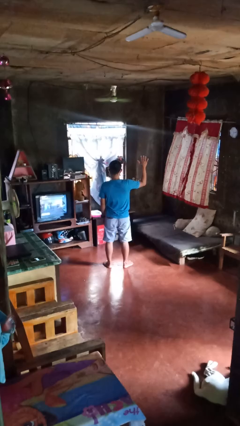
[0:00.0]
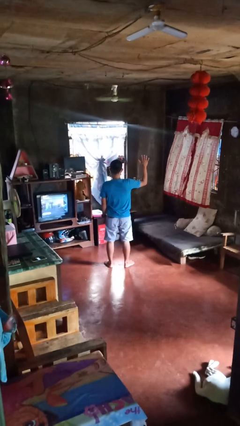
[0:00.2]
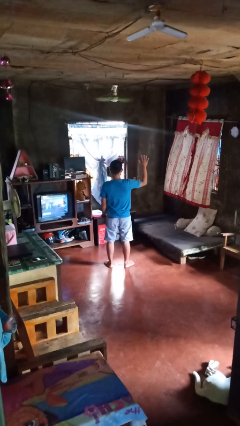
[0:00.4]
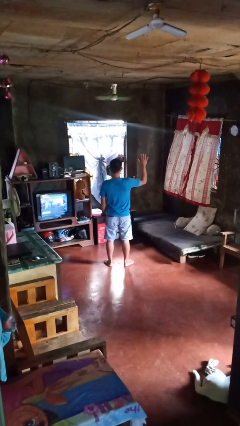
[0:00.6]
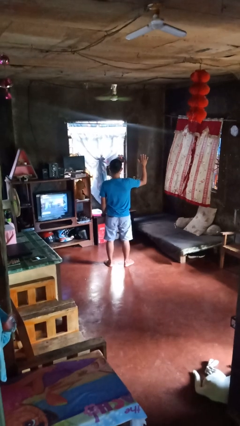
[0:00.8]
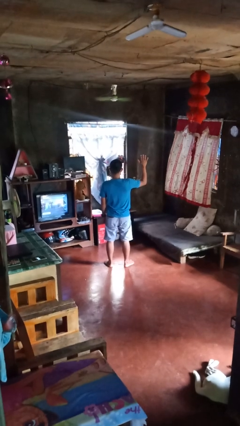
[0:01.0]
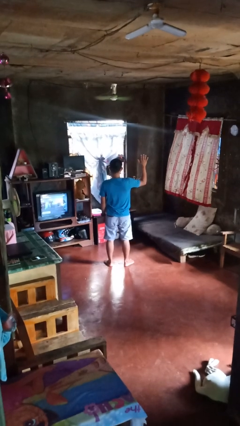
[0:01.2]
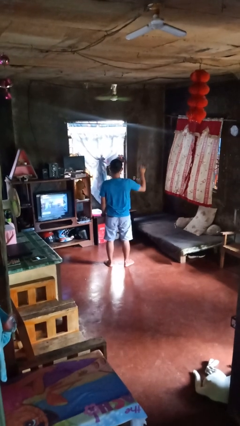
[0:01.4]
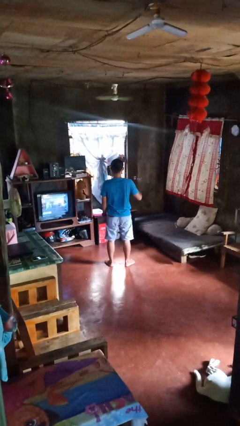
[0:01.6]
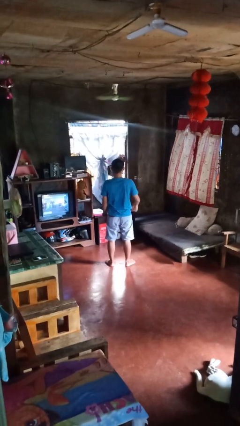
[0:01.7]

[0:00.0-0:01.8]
person gestures number five

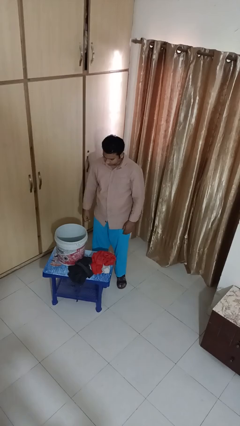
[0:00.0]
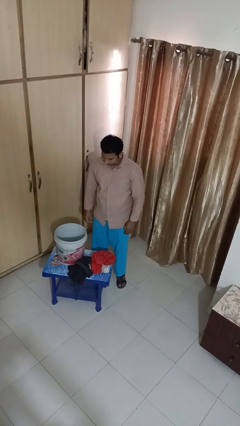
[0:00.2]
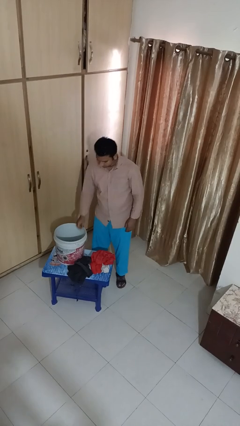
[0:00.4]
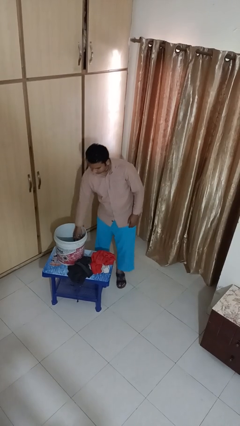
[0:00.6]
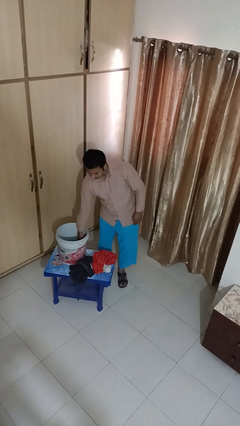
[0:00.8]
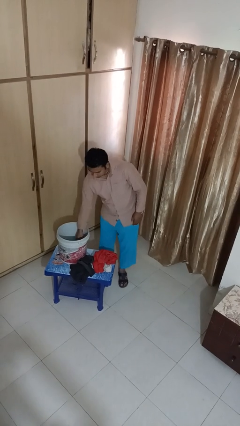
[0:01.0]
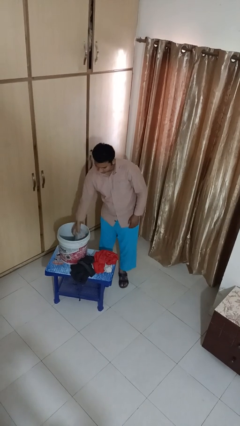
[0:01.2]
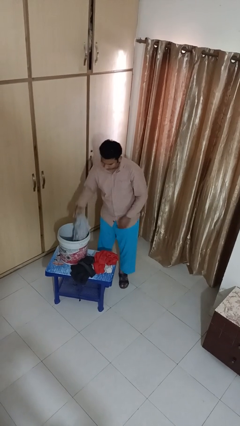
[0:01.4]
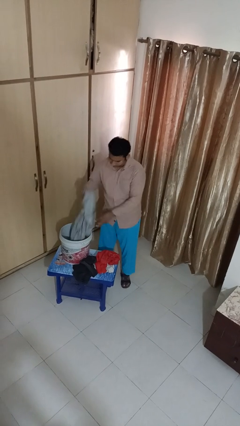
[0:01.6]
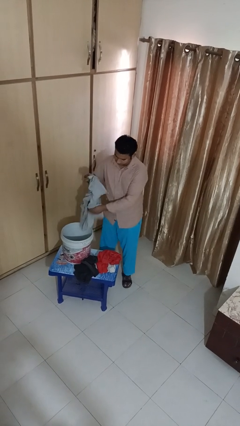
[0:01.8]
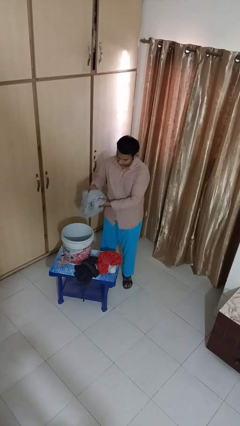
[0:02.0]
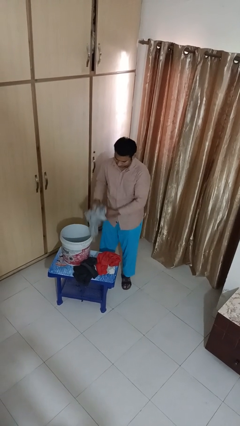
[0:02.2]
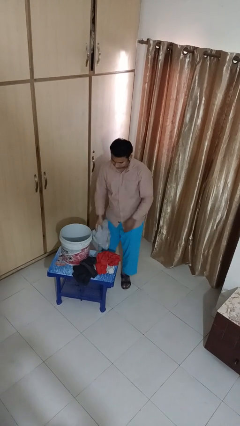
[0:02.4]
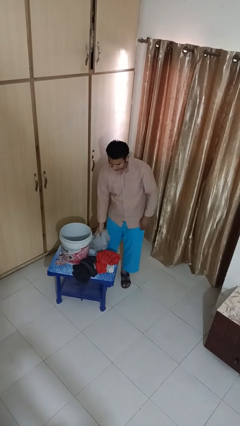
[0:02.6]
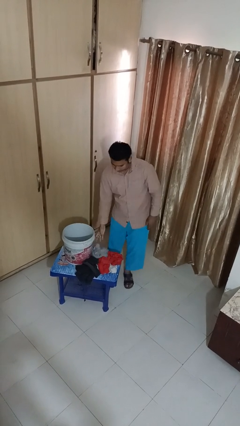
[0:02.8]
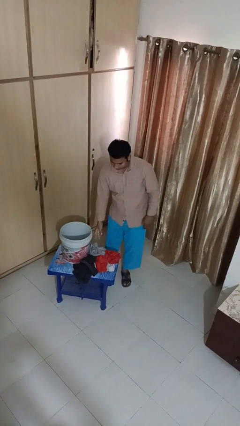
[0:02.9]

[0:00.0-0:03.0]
person takes object from basket

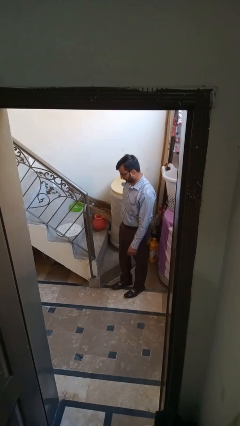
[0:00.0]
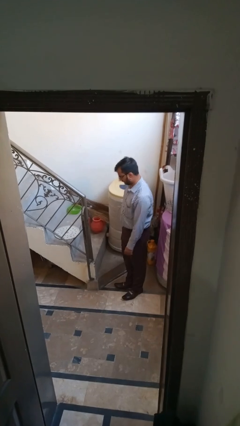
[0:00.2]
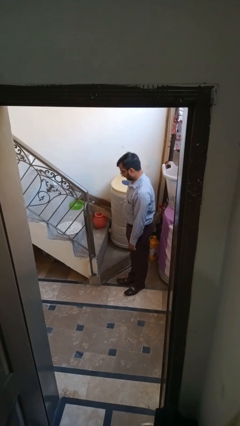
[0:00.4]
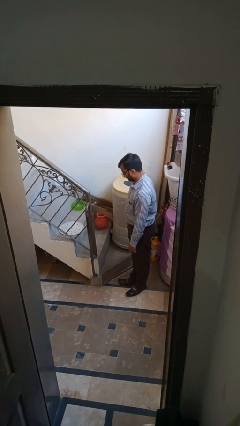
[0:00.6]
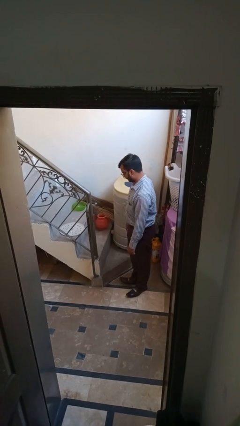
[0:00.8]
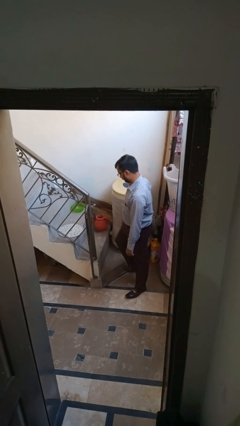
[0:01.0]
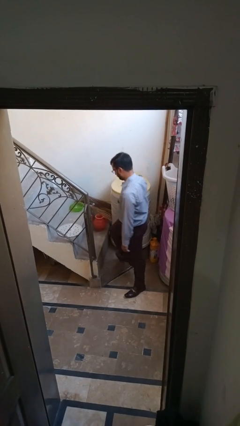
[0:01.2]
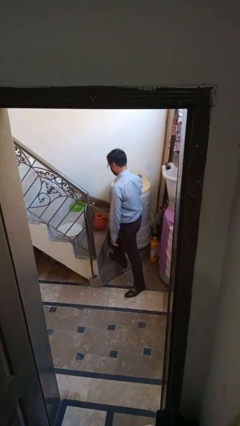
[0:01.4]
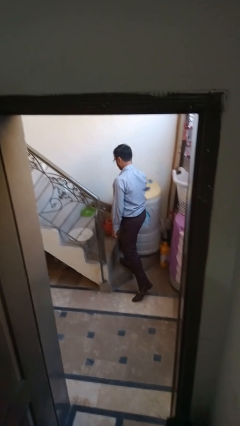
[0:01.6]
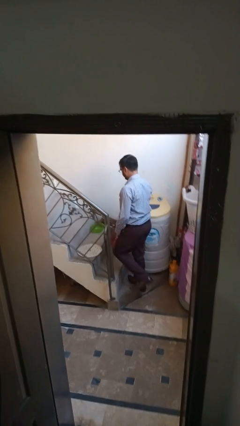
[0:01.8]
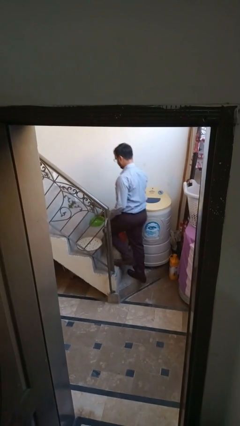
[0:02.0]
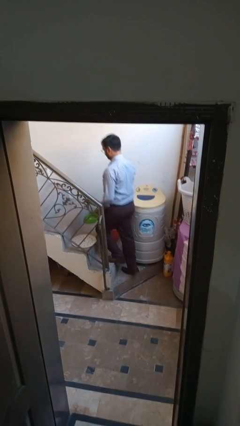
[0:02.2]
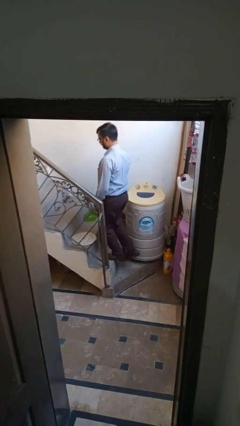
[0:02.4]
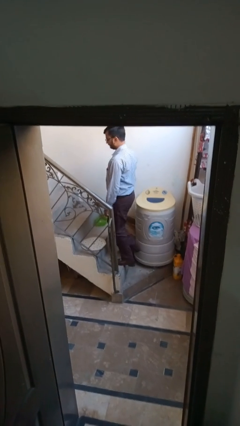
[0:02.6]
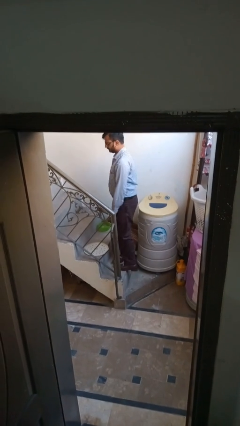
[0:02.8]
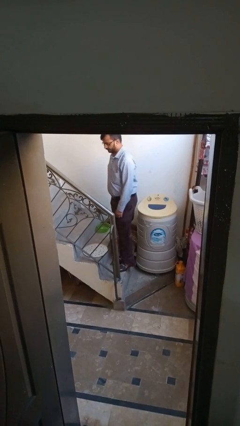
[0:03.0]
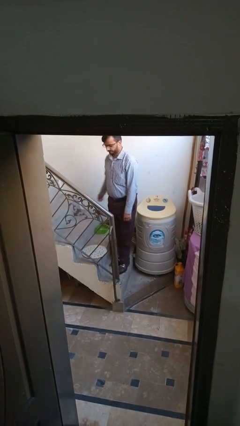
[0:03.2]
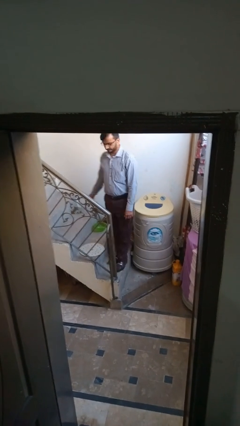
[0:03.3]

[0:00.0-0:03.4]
person climbs up stairs

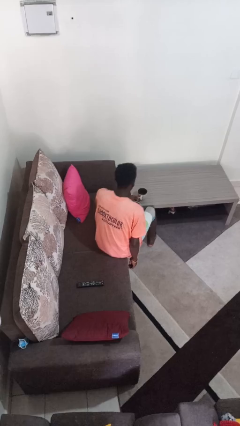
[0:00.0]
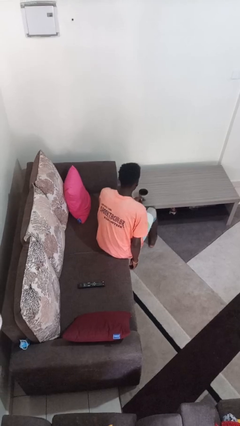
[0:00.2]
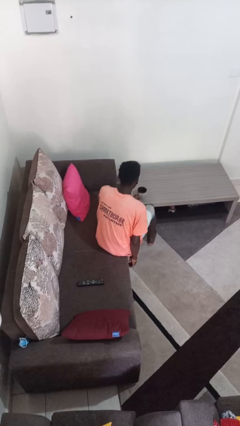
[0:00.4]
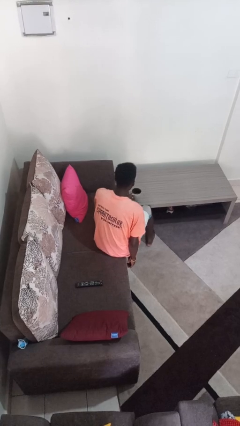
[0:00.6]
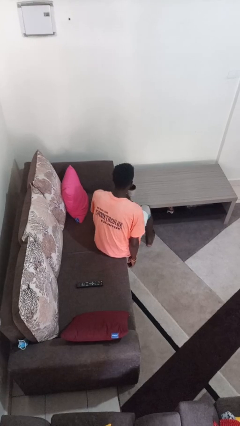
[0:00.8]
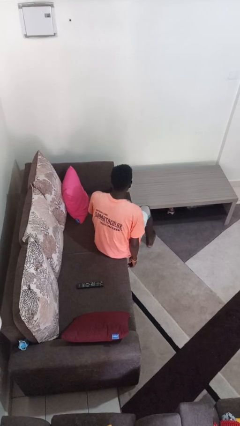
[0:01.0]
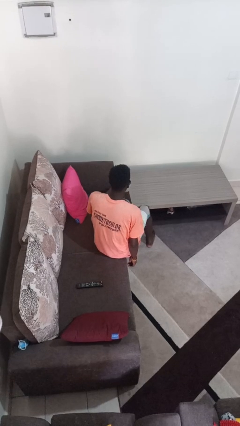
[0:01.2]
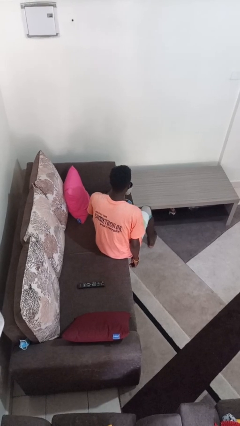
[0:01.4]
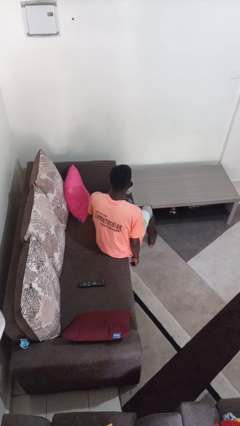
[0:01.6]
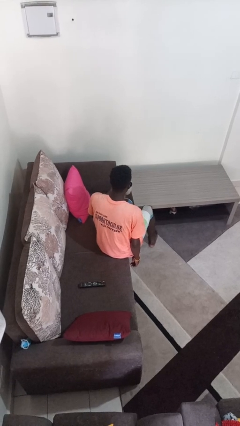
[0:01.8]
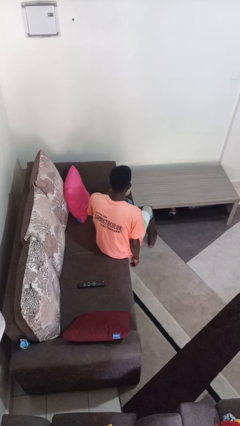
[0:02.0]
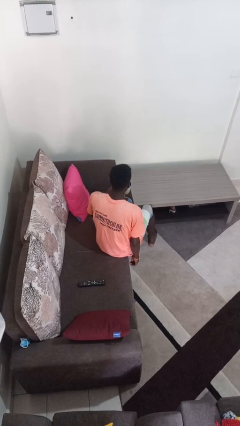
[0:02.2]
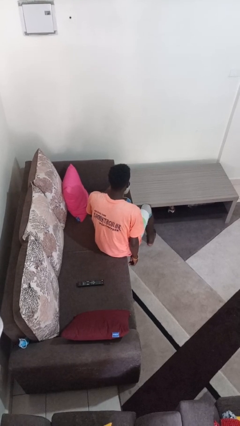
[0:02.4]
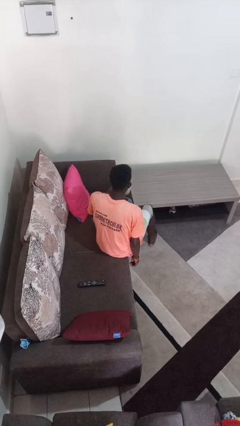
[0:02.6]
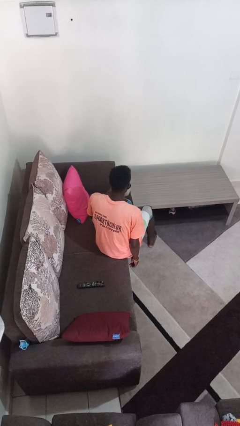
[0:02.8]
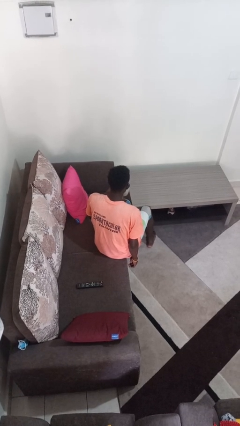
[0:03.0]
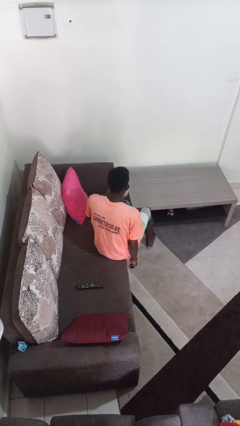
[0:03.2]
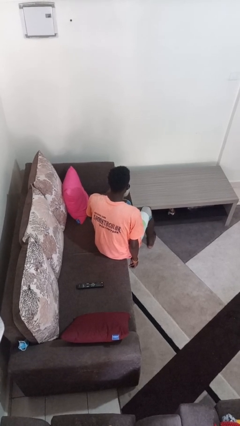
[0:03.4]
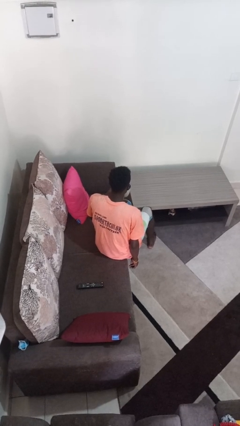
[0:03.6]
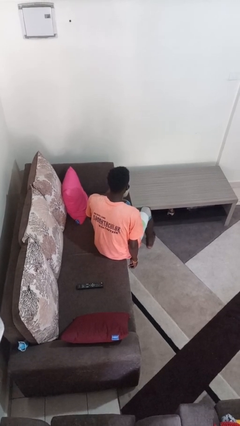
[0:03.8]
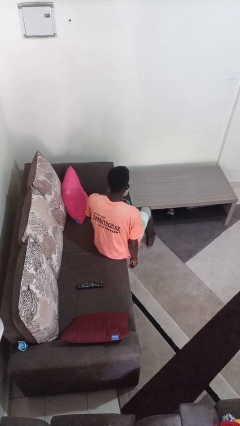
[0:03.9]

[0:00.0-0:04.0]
person picks up object from table

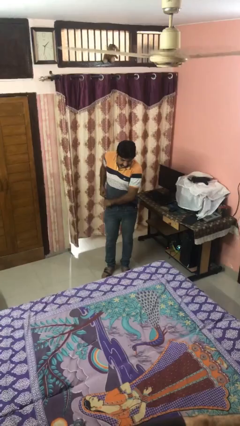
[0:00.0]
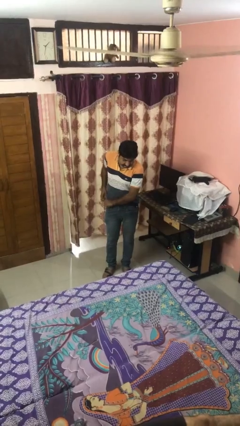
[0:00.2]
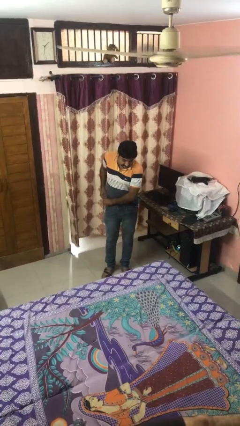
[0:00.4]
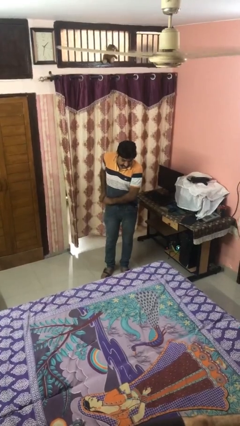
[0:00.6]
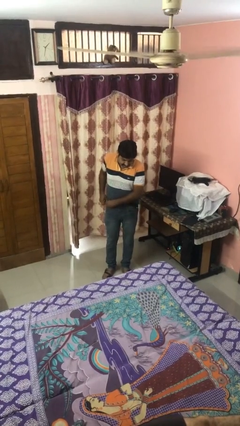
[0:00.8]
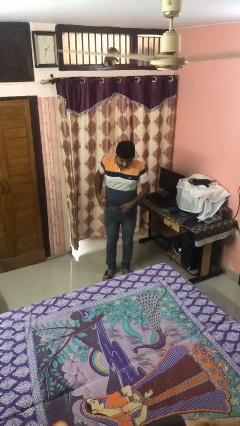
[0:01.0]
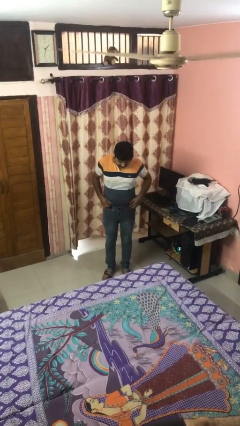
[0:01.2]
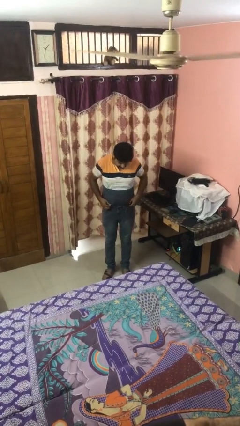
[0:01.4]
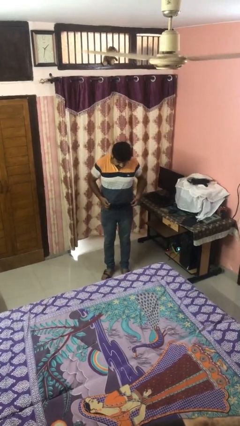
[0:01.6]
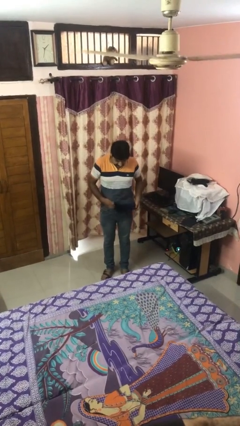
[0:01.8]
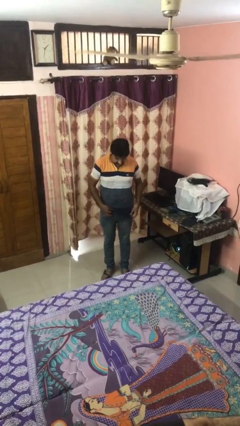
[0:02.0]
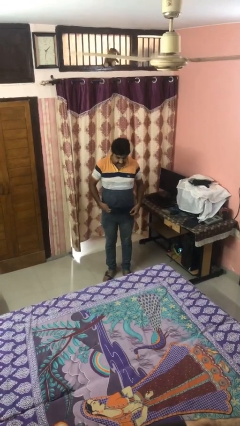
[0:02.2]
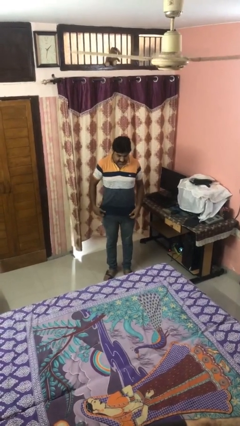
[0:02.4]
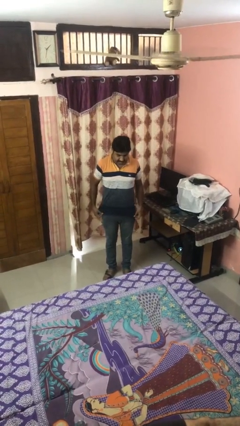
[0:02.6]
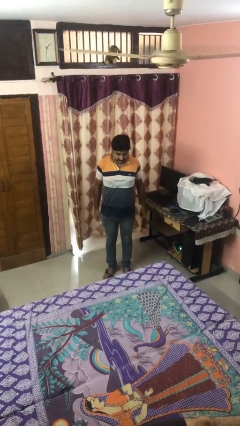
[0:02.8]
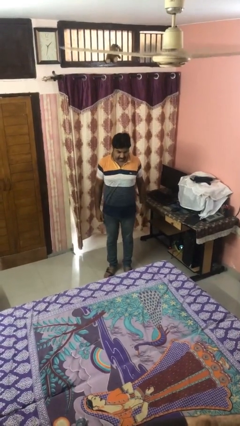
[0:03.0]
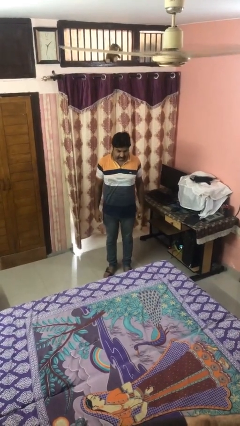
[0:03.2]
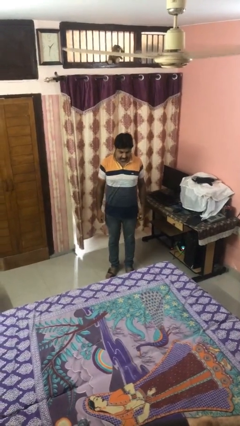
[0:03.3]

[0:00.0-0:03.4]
person untucks shirt

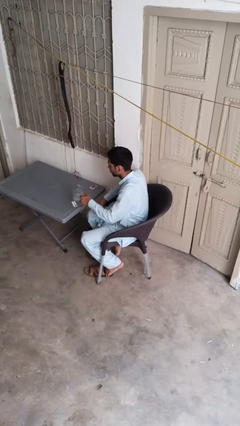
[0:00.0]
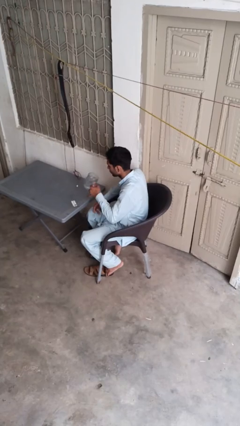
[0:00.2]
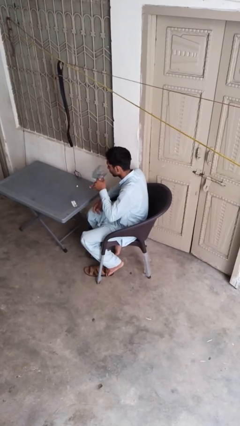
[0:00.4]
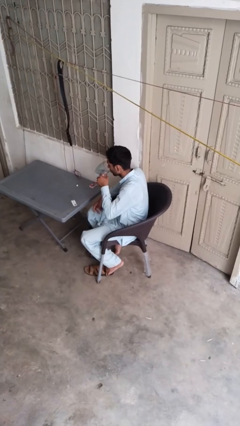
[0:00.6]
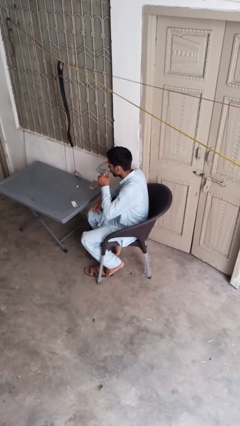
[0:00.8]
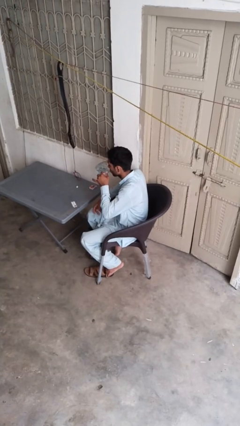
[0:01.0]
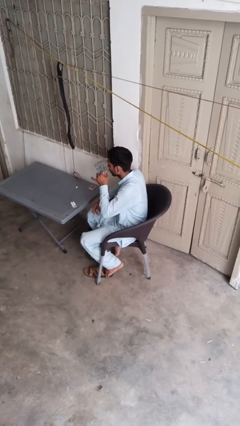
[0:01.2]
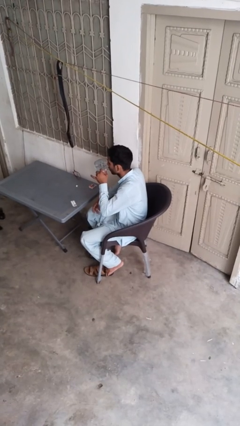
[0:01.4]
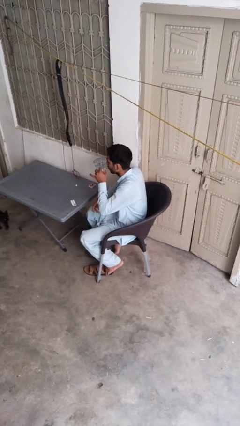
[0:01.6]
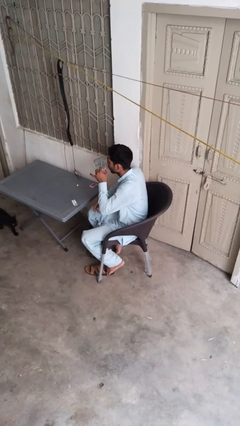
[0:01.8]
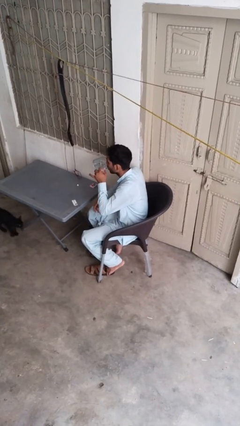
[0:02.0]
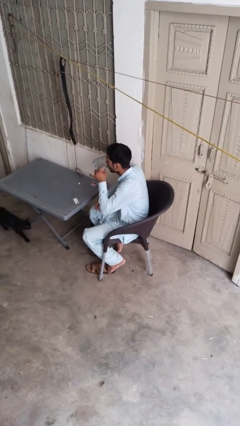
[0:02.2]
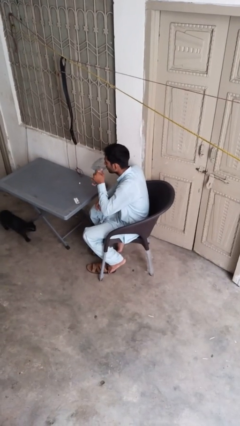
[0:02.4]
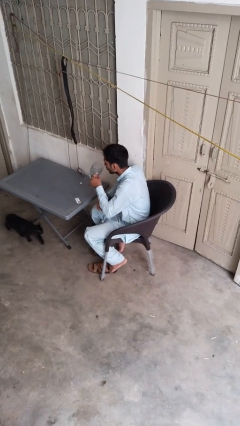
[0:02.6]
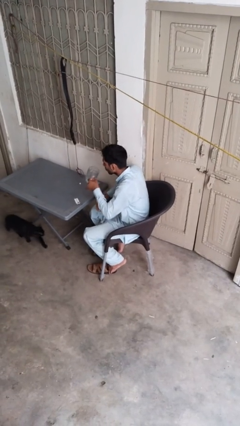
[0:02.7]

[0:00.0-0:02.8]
person drinks from cup
